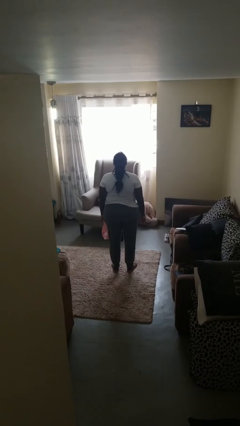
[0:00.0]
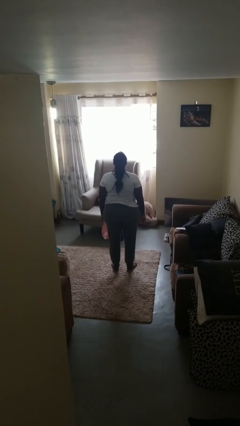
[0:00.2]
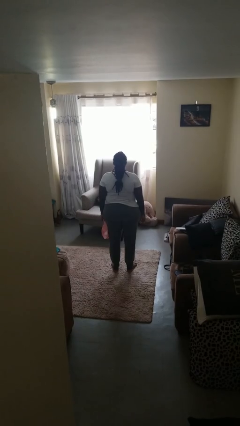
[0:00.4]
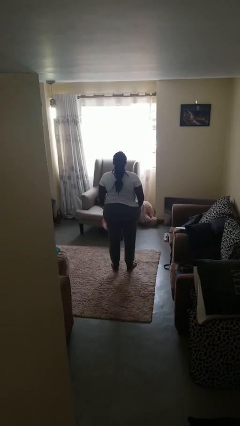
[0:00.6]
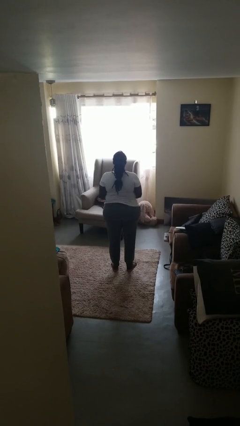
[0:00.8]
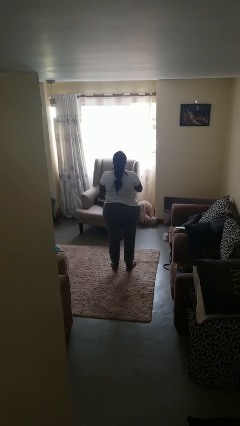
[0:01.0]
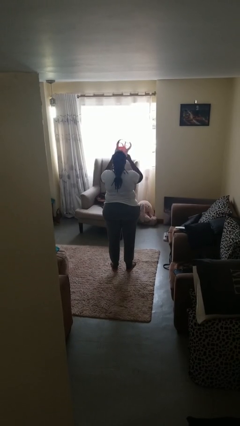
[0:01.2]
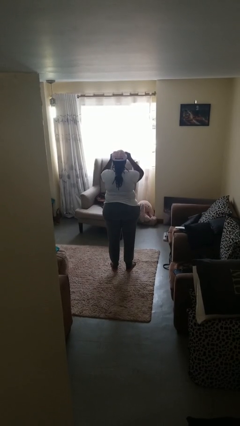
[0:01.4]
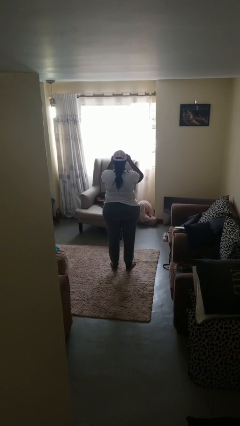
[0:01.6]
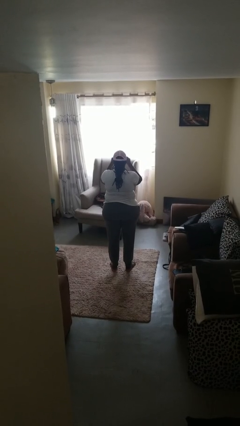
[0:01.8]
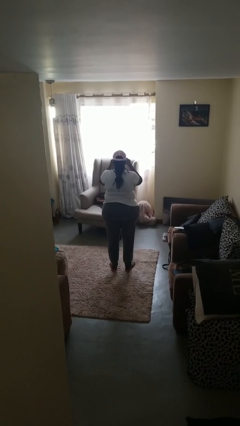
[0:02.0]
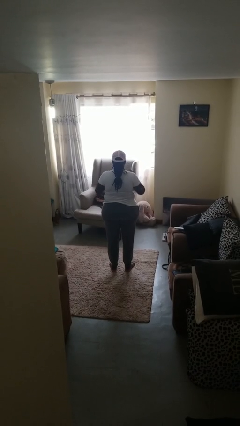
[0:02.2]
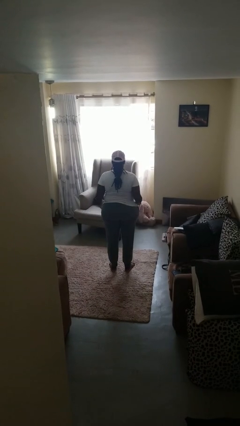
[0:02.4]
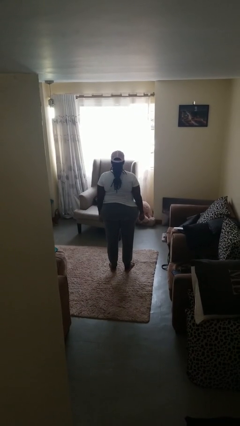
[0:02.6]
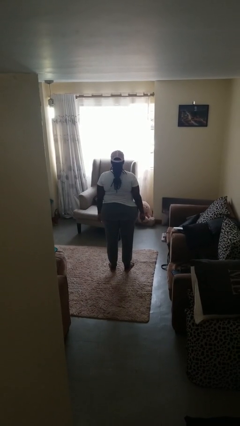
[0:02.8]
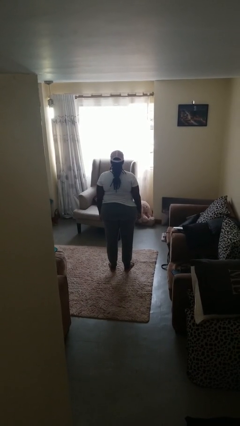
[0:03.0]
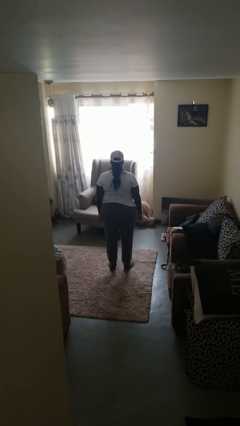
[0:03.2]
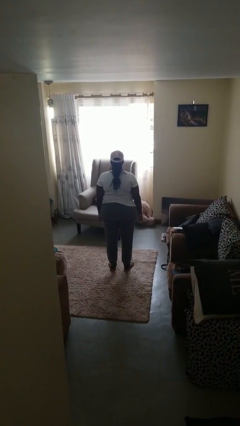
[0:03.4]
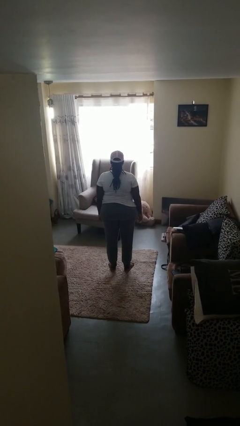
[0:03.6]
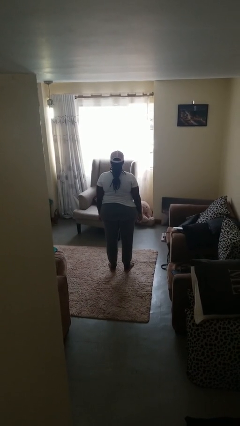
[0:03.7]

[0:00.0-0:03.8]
person puts on hat

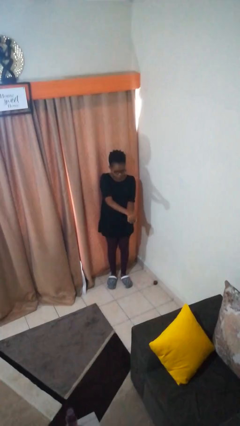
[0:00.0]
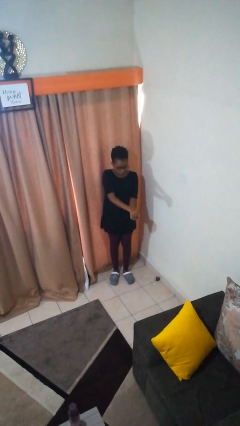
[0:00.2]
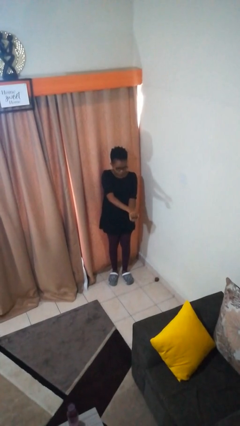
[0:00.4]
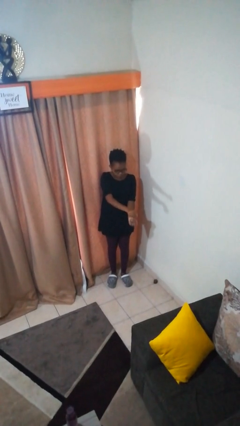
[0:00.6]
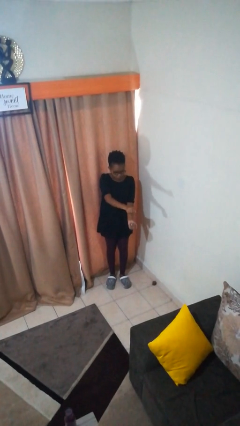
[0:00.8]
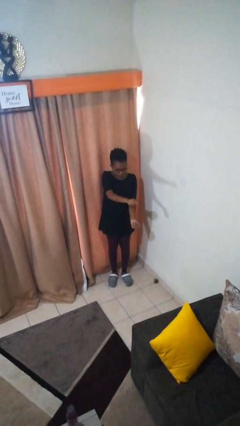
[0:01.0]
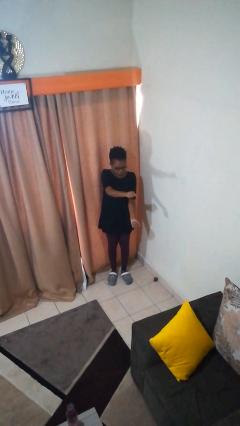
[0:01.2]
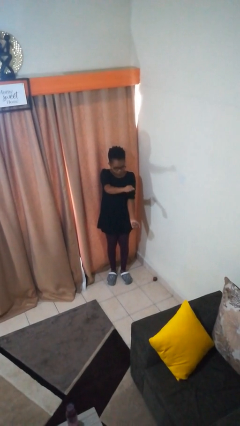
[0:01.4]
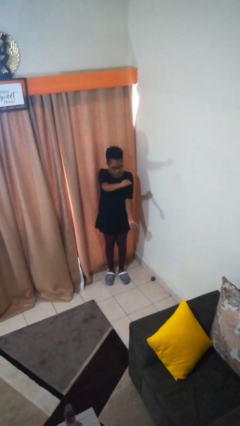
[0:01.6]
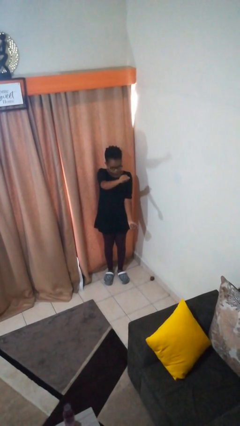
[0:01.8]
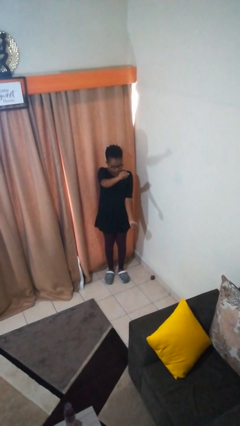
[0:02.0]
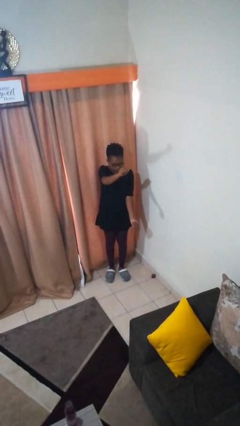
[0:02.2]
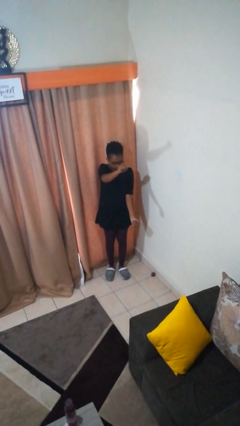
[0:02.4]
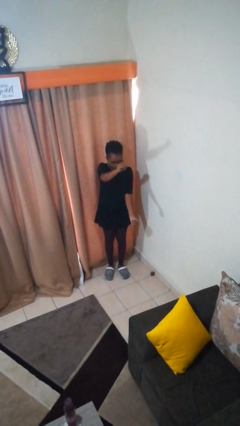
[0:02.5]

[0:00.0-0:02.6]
person gestures zoom in

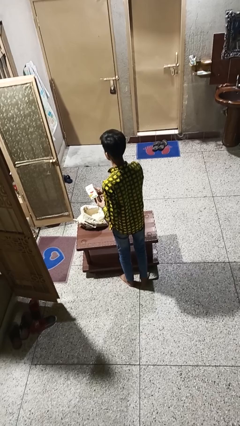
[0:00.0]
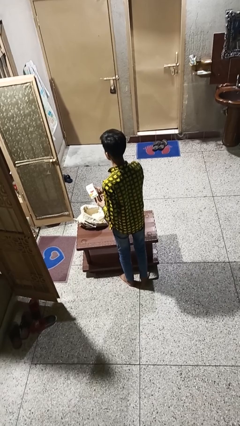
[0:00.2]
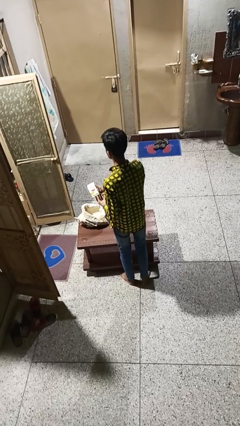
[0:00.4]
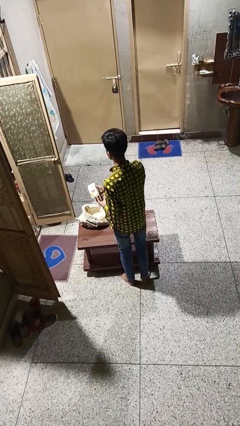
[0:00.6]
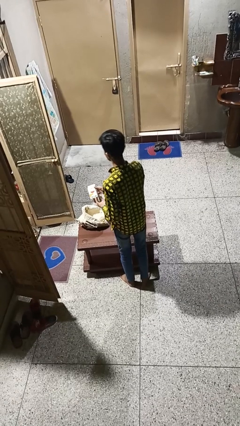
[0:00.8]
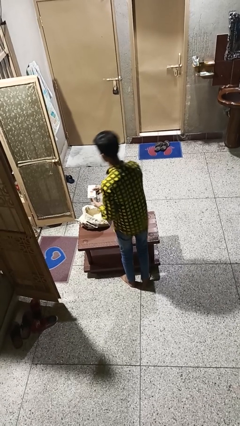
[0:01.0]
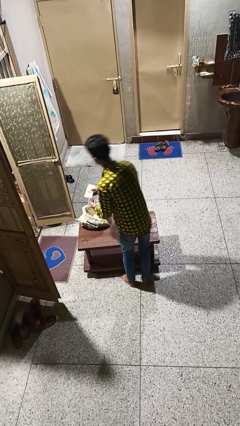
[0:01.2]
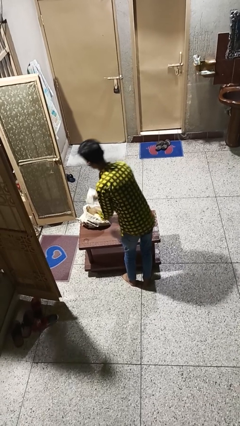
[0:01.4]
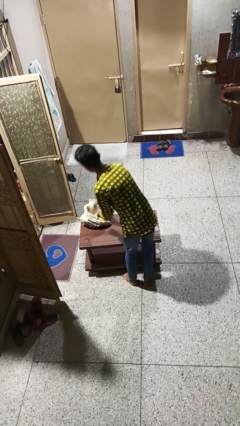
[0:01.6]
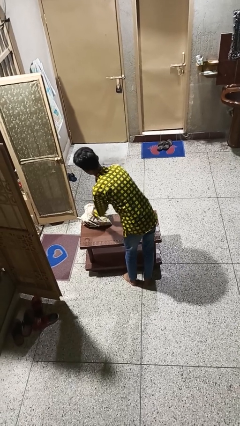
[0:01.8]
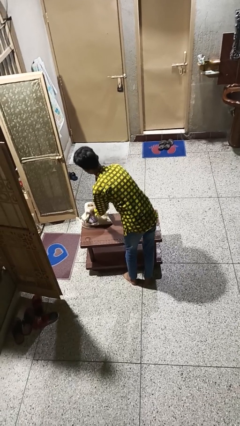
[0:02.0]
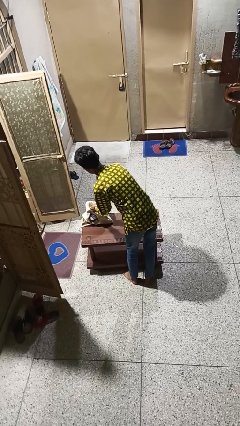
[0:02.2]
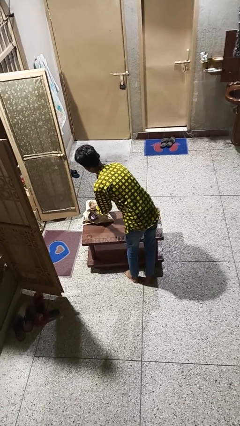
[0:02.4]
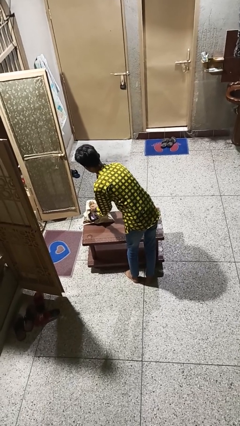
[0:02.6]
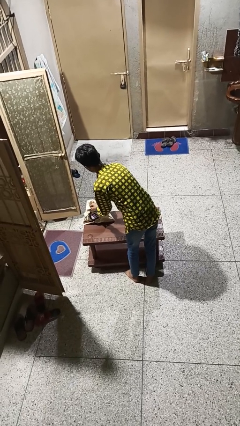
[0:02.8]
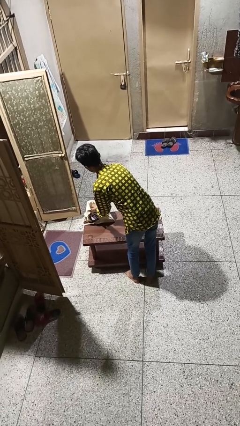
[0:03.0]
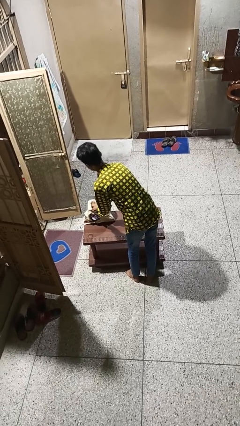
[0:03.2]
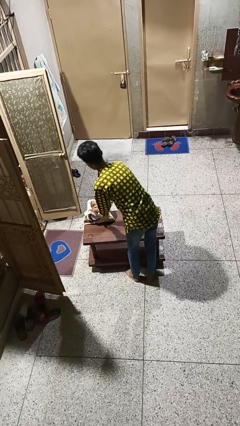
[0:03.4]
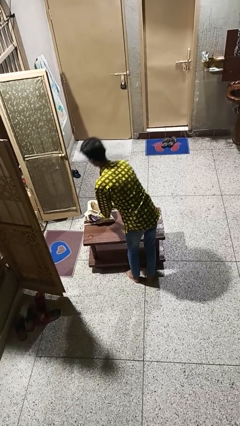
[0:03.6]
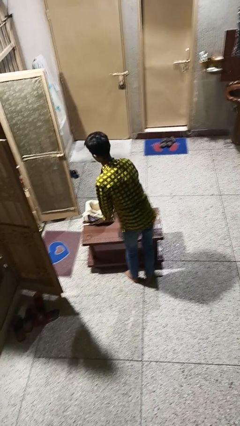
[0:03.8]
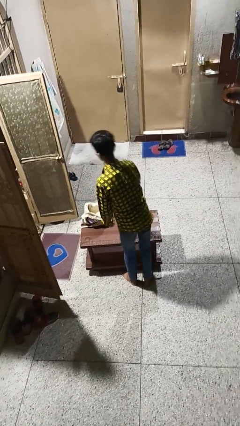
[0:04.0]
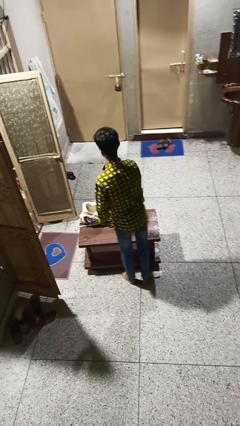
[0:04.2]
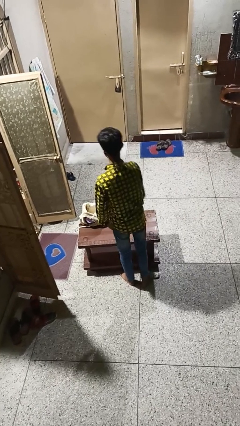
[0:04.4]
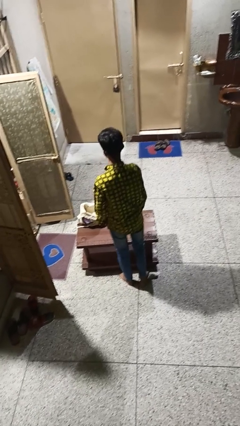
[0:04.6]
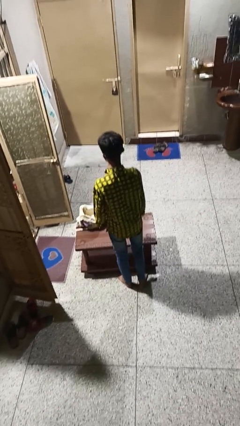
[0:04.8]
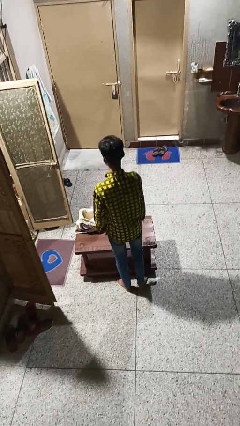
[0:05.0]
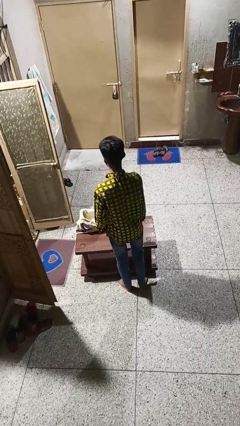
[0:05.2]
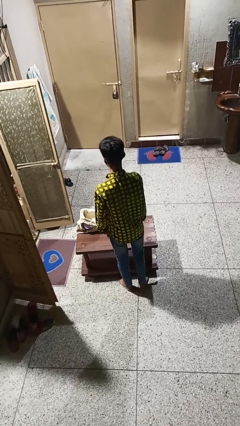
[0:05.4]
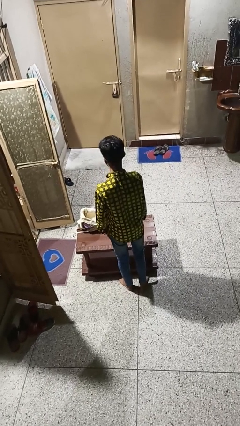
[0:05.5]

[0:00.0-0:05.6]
person puts object into bag

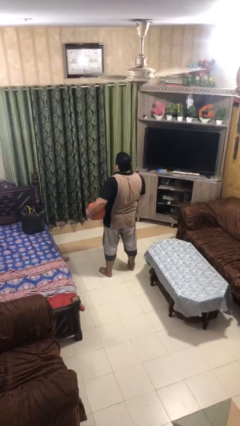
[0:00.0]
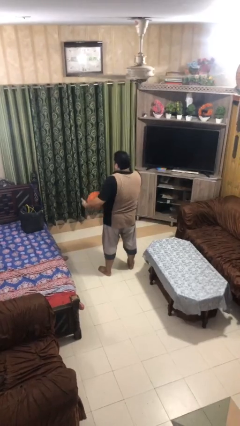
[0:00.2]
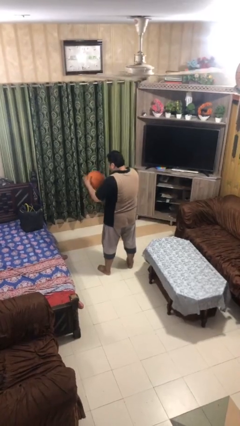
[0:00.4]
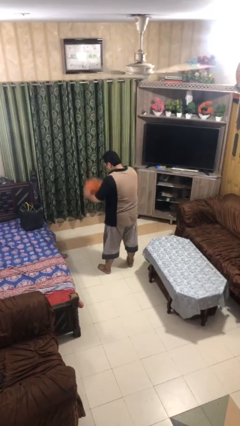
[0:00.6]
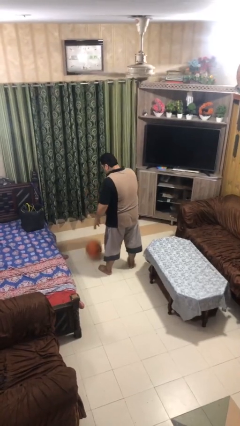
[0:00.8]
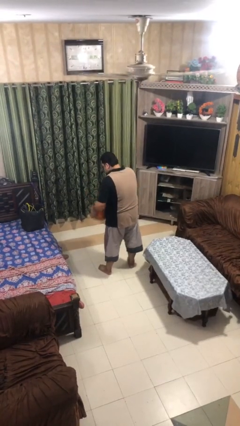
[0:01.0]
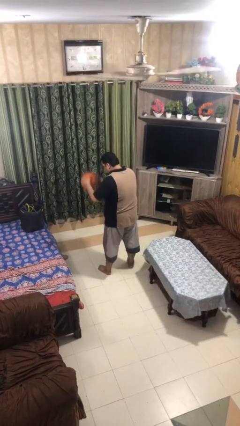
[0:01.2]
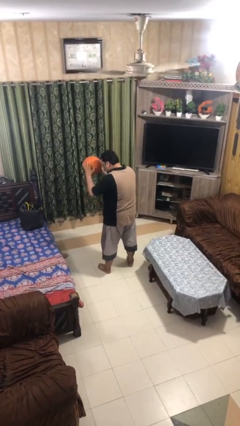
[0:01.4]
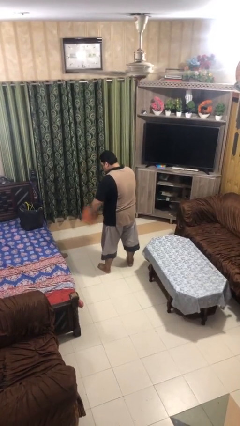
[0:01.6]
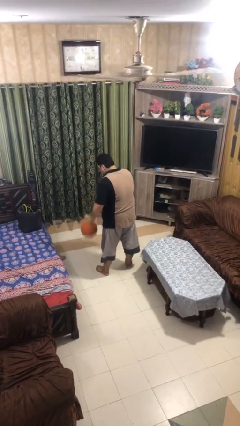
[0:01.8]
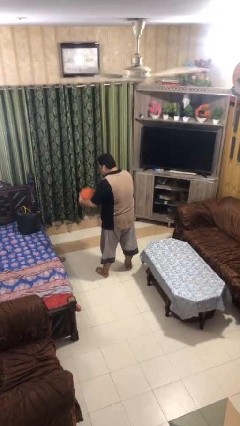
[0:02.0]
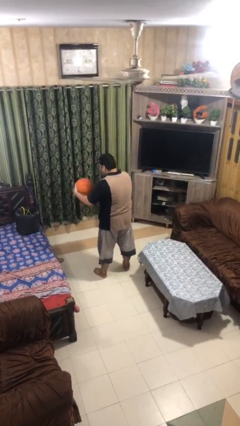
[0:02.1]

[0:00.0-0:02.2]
person bounces ball on floor

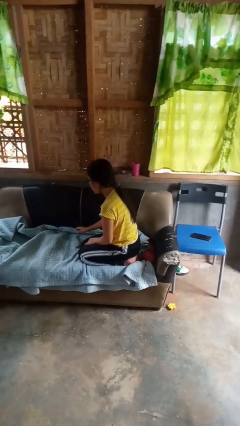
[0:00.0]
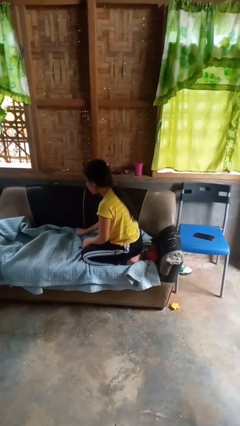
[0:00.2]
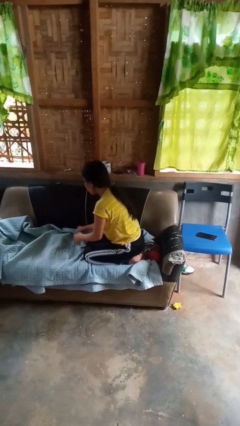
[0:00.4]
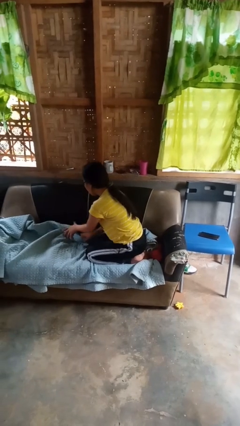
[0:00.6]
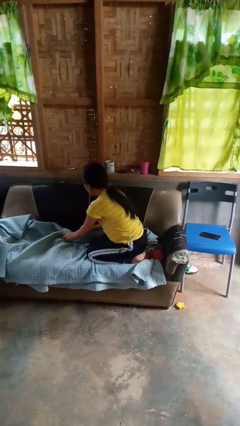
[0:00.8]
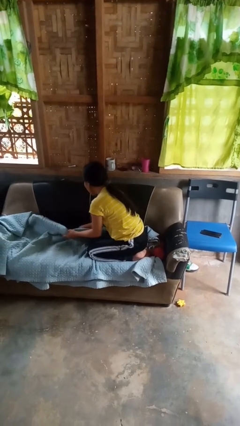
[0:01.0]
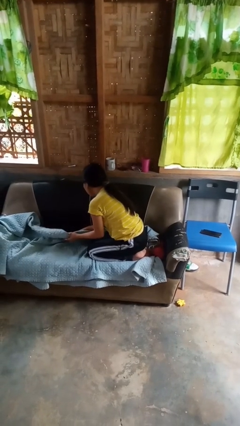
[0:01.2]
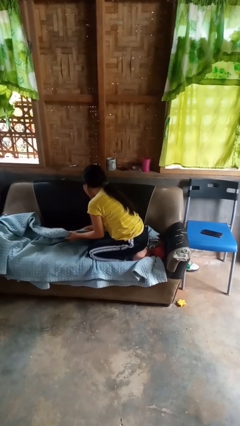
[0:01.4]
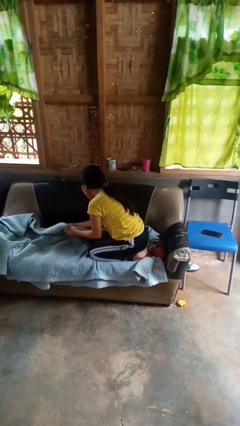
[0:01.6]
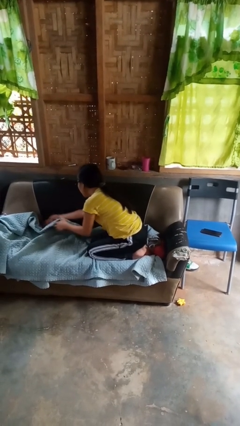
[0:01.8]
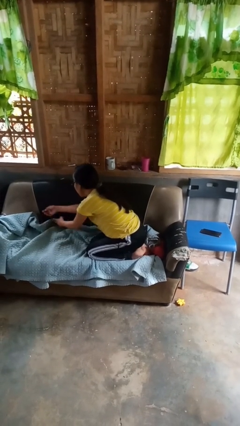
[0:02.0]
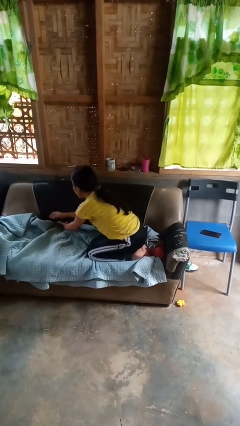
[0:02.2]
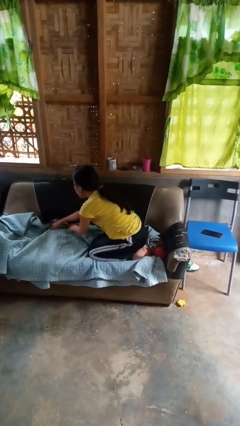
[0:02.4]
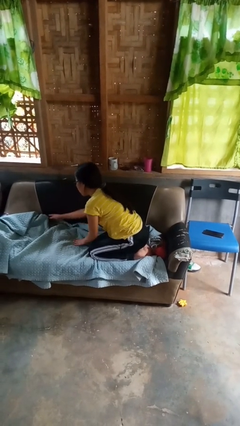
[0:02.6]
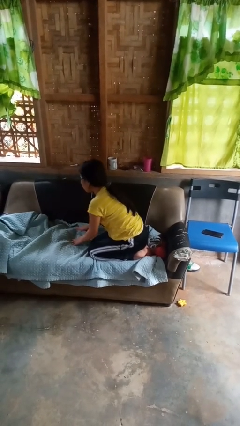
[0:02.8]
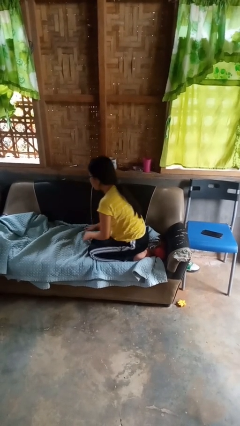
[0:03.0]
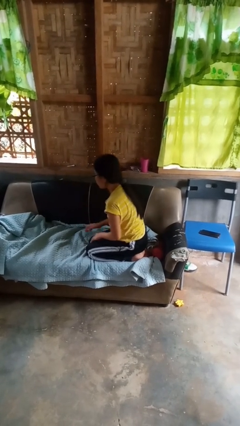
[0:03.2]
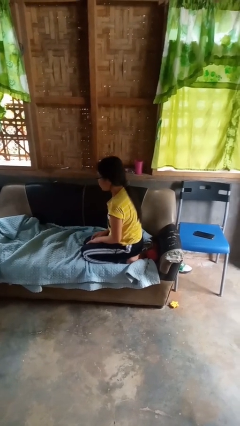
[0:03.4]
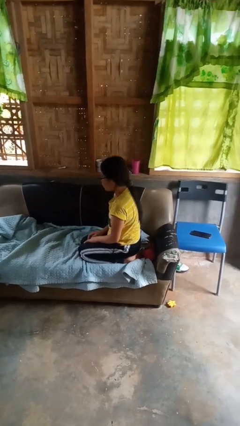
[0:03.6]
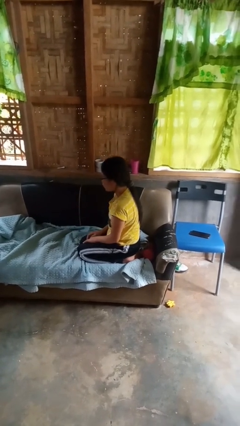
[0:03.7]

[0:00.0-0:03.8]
person searches in couch
